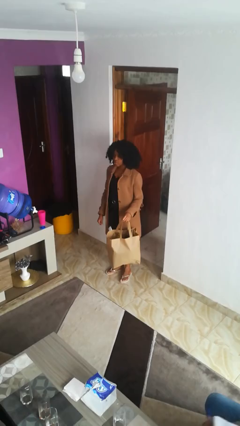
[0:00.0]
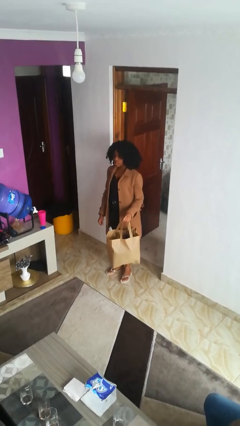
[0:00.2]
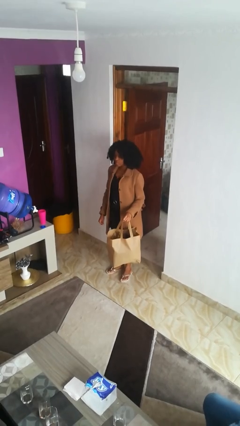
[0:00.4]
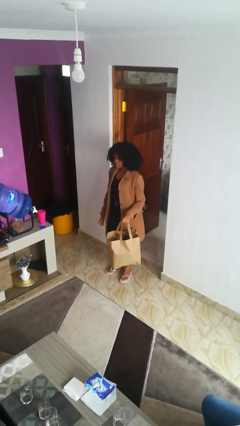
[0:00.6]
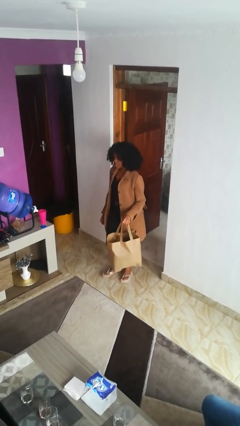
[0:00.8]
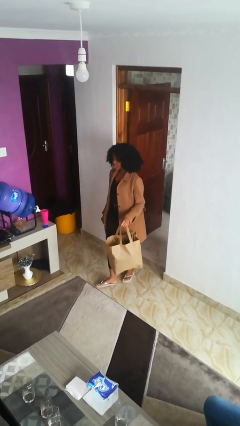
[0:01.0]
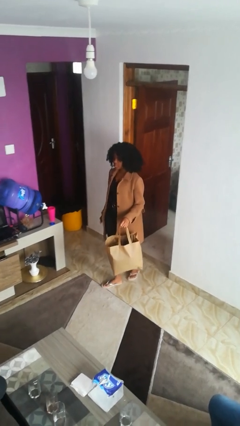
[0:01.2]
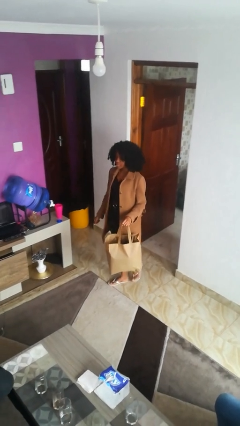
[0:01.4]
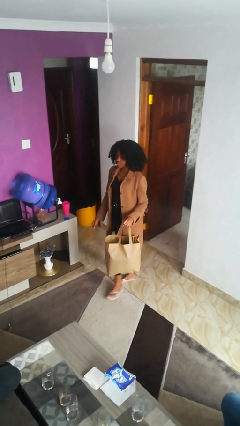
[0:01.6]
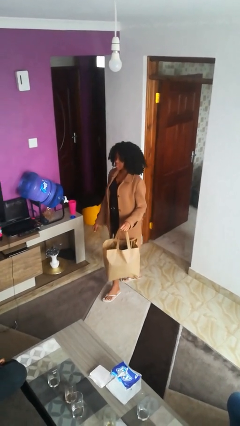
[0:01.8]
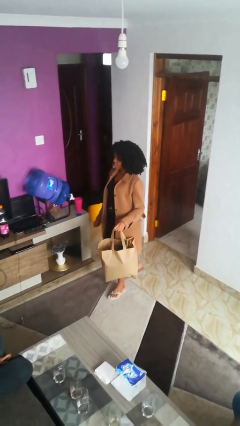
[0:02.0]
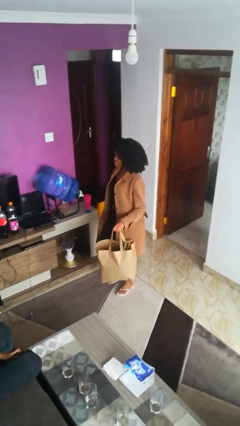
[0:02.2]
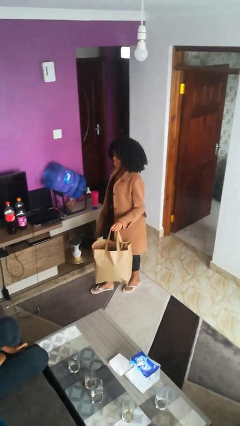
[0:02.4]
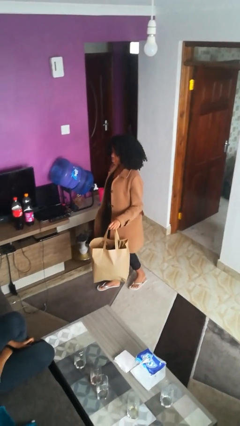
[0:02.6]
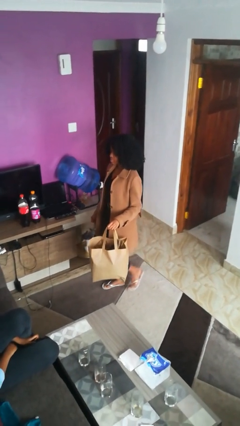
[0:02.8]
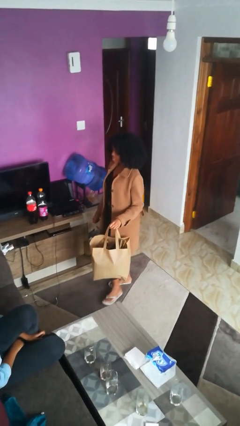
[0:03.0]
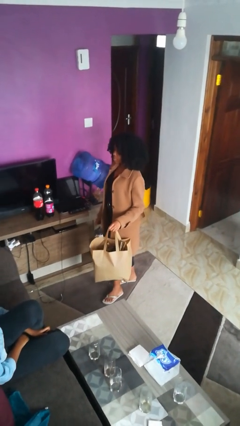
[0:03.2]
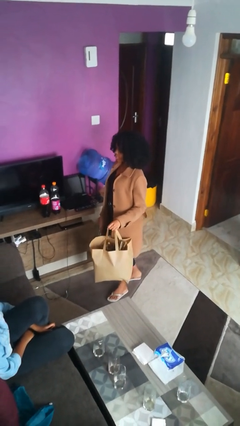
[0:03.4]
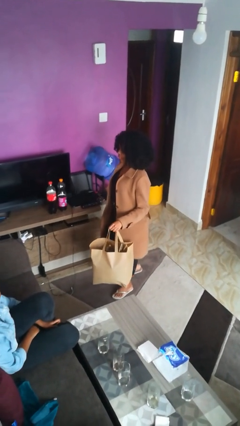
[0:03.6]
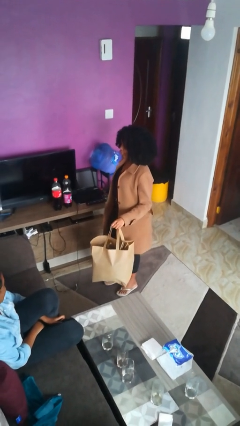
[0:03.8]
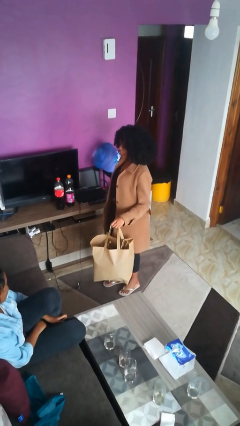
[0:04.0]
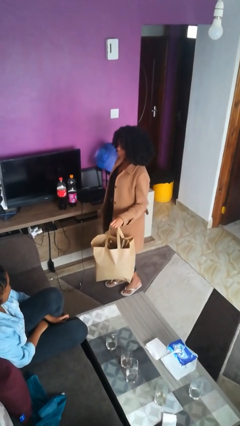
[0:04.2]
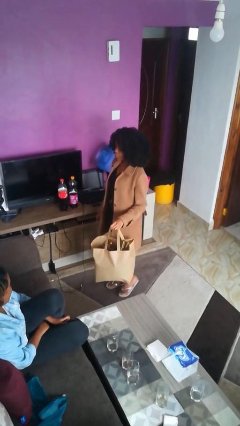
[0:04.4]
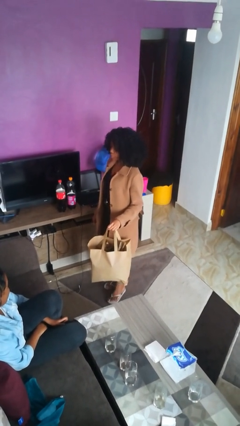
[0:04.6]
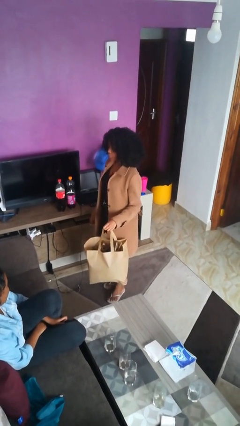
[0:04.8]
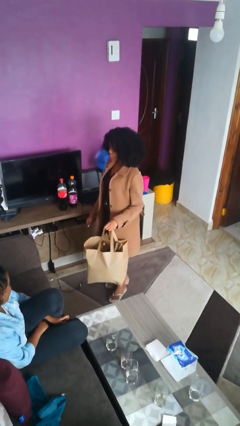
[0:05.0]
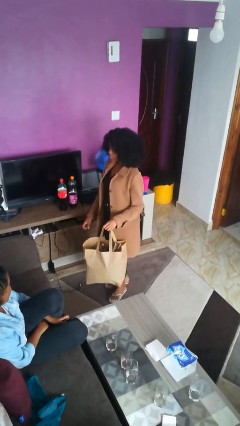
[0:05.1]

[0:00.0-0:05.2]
person carries groceries

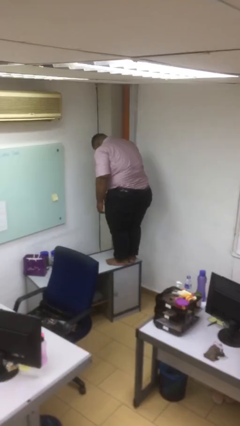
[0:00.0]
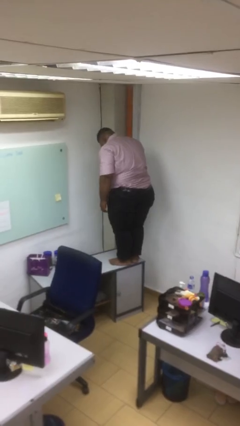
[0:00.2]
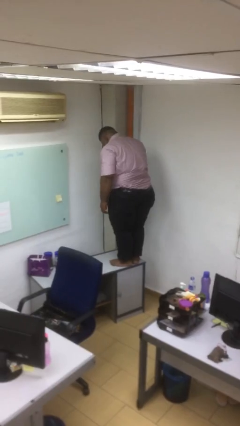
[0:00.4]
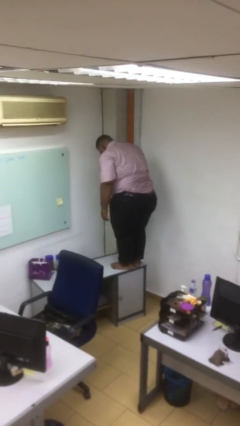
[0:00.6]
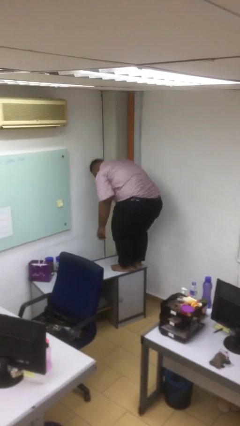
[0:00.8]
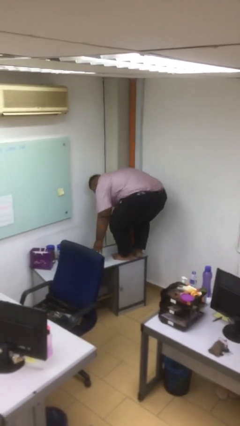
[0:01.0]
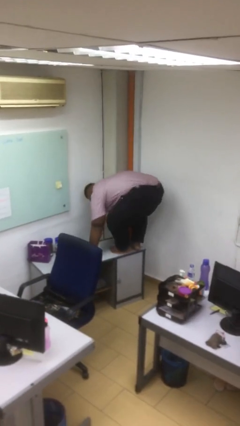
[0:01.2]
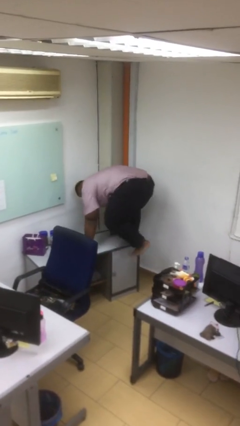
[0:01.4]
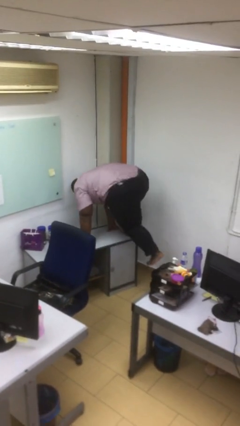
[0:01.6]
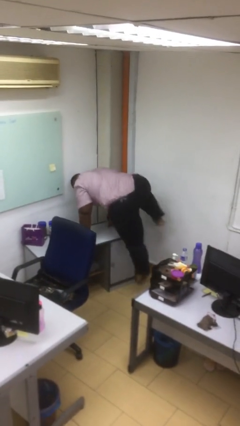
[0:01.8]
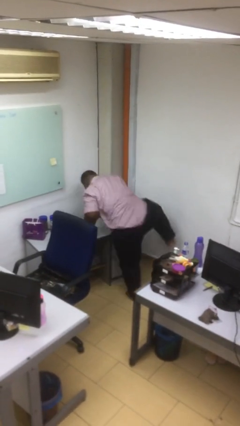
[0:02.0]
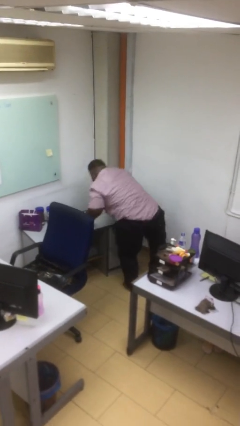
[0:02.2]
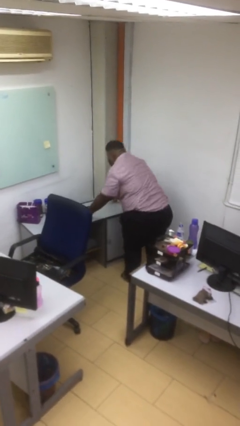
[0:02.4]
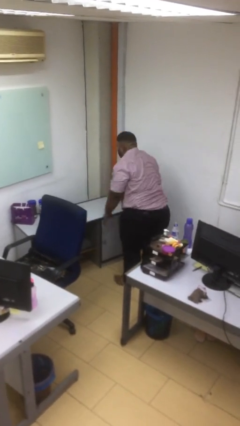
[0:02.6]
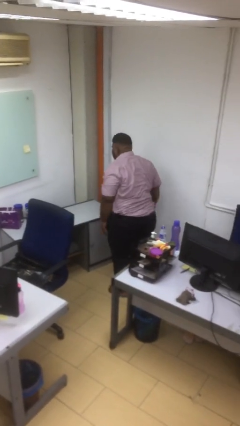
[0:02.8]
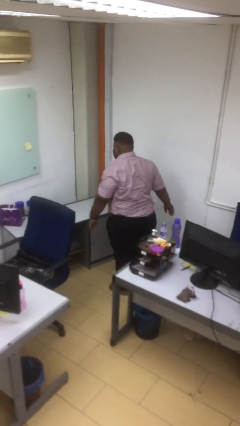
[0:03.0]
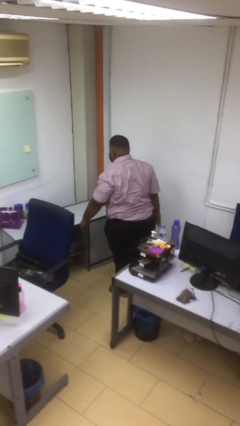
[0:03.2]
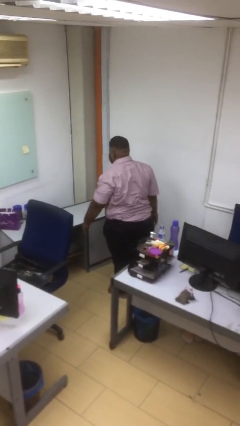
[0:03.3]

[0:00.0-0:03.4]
person climbs off table

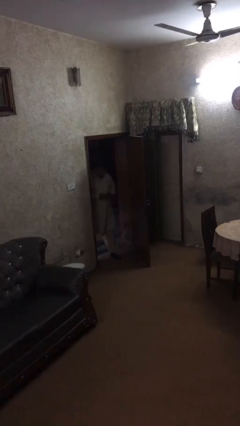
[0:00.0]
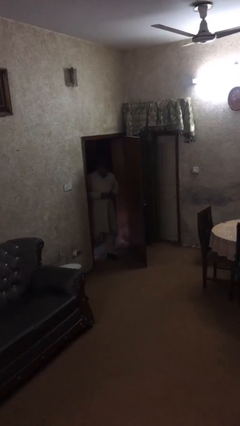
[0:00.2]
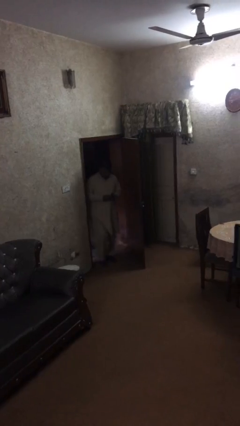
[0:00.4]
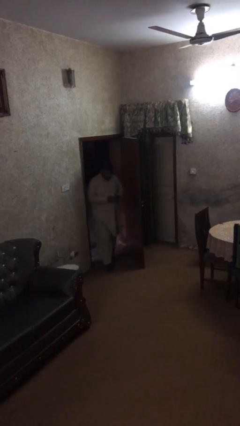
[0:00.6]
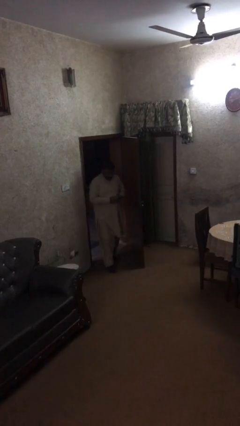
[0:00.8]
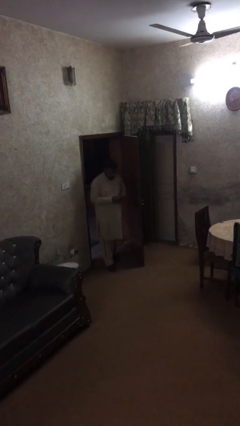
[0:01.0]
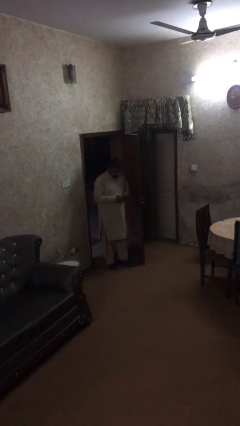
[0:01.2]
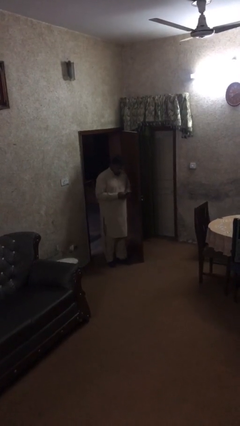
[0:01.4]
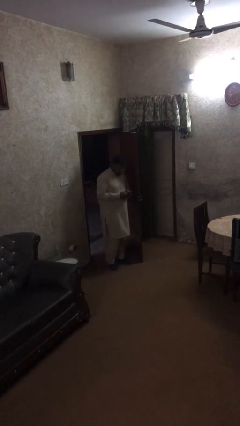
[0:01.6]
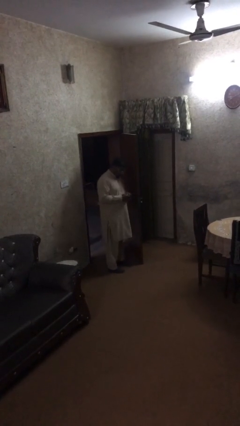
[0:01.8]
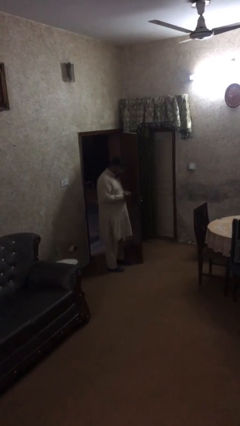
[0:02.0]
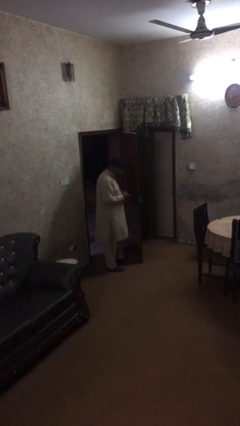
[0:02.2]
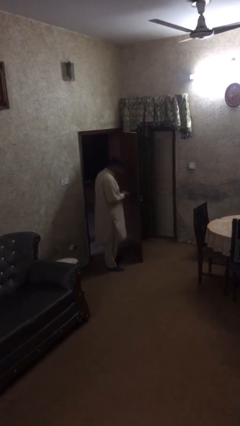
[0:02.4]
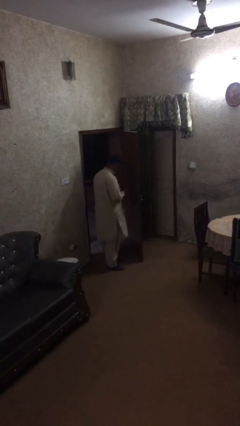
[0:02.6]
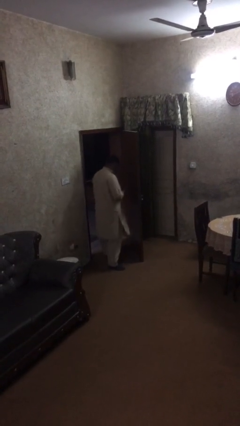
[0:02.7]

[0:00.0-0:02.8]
person enters scene through structure

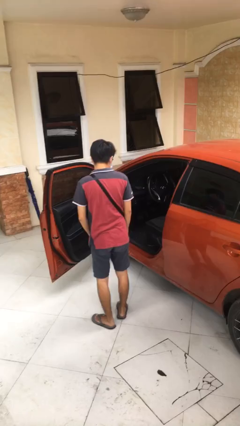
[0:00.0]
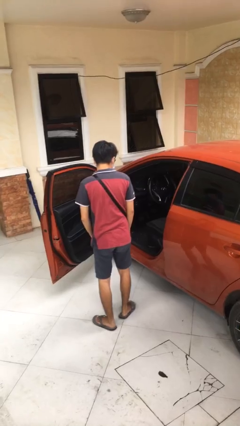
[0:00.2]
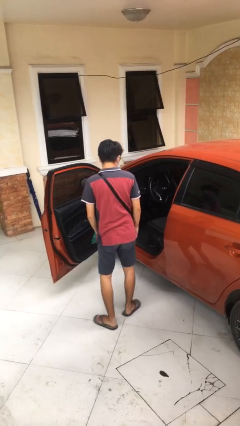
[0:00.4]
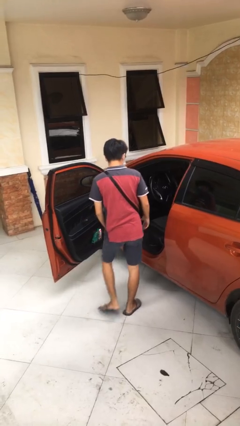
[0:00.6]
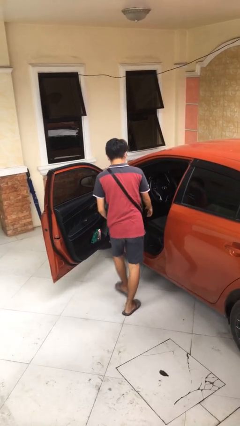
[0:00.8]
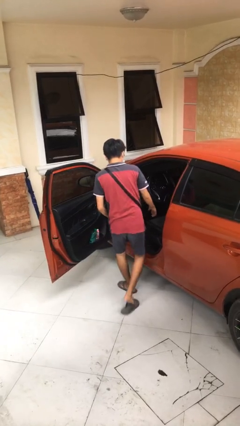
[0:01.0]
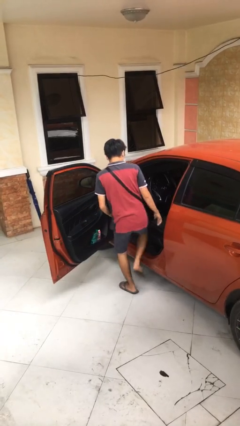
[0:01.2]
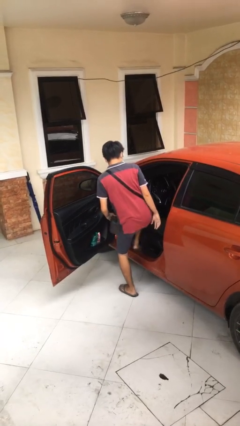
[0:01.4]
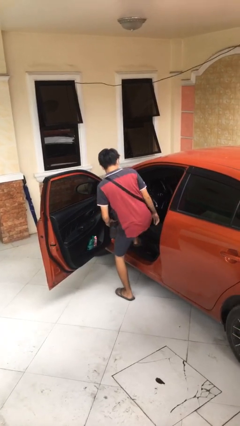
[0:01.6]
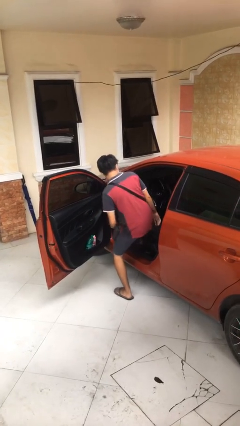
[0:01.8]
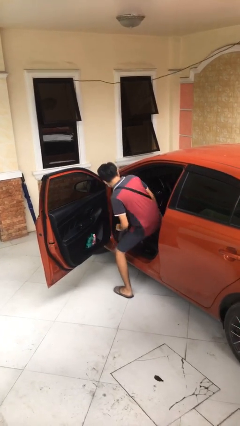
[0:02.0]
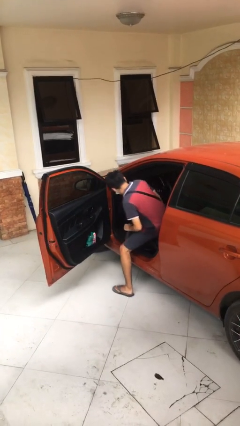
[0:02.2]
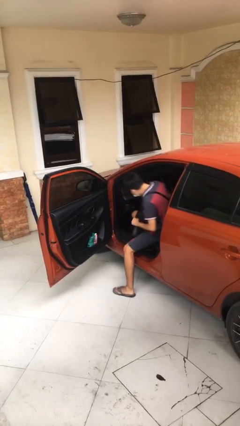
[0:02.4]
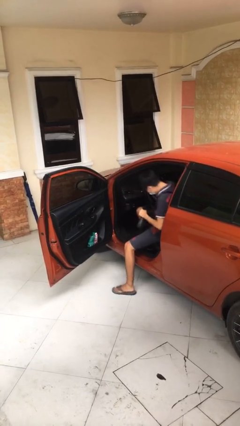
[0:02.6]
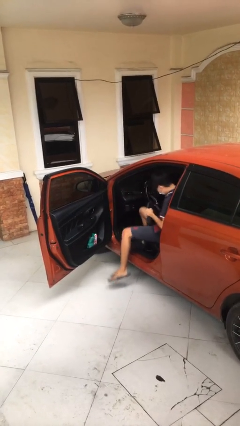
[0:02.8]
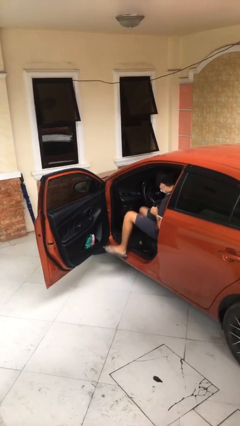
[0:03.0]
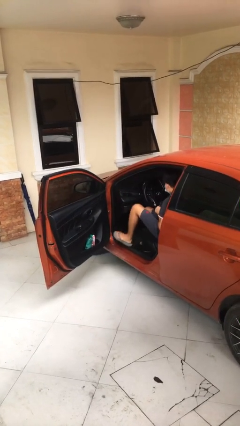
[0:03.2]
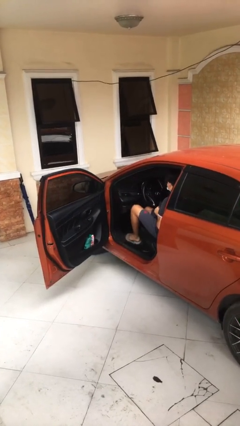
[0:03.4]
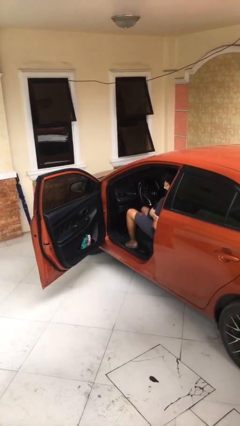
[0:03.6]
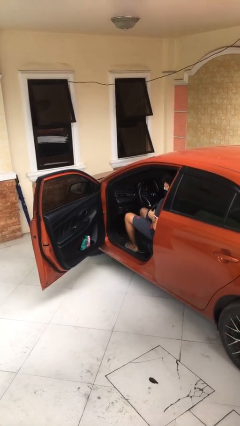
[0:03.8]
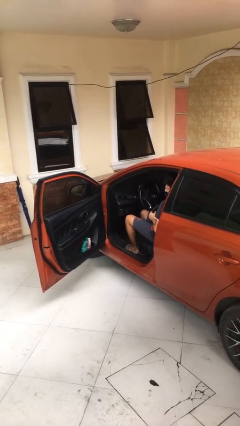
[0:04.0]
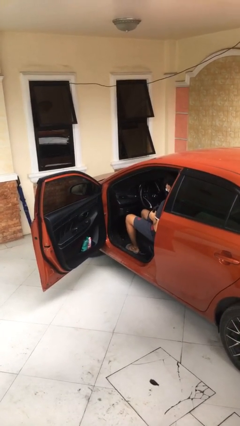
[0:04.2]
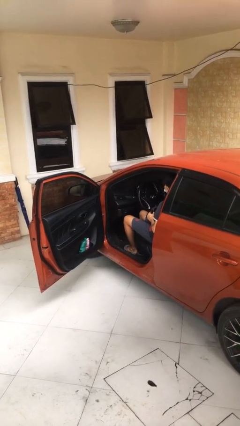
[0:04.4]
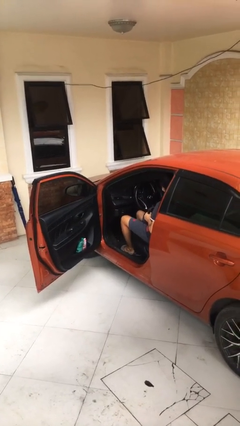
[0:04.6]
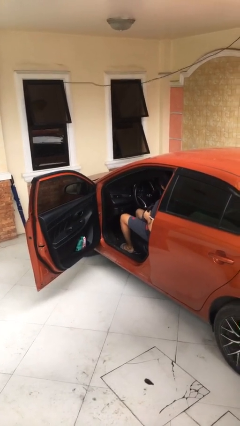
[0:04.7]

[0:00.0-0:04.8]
person enters car

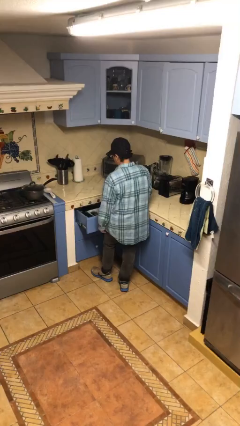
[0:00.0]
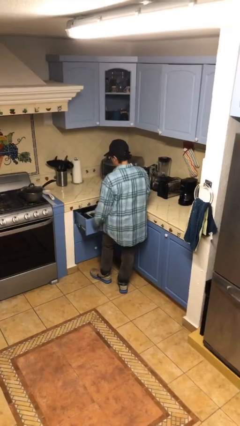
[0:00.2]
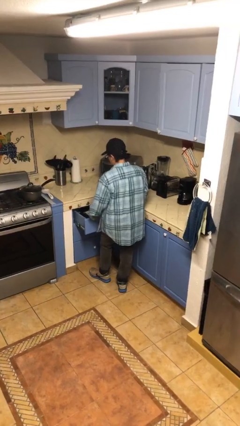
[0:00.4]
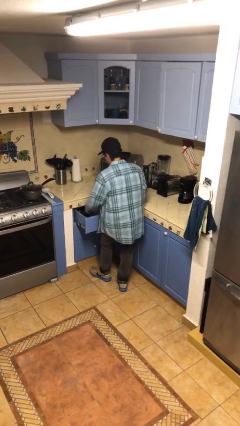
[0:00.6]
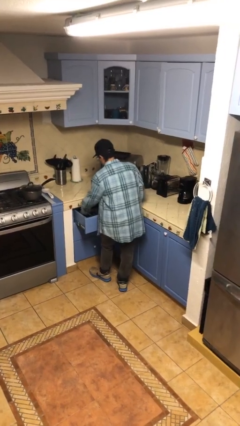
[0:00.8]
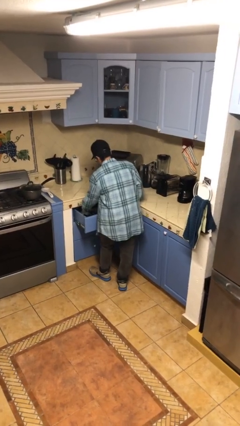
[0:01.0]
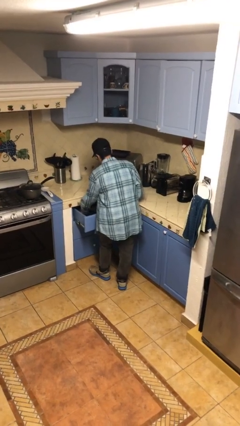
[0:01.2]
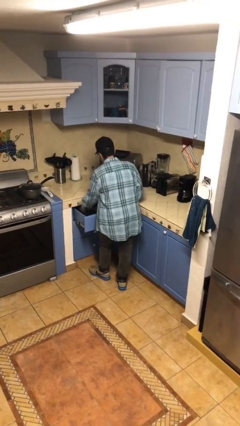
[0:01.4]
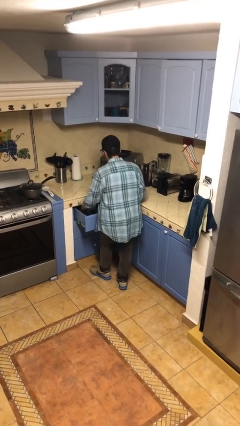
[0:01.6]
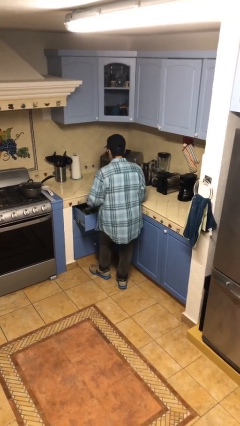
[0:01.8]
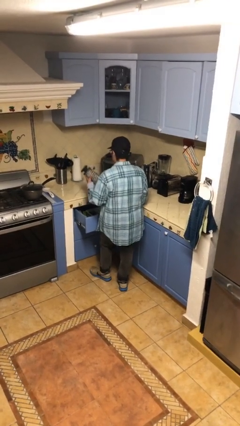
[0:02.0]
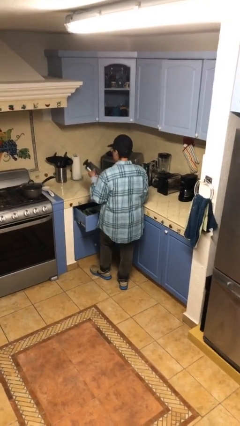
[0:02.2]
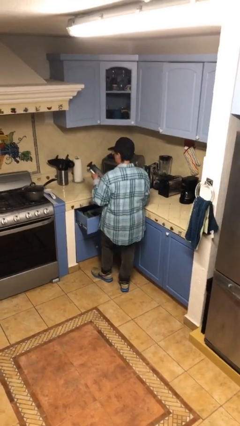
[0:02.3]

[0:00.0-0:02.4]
person takes object from kitchen drawer
